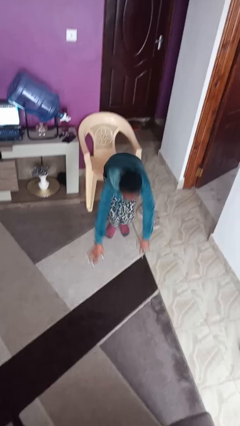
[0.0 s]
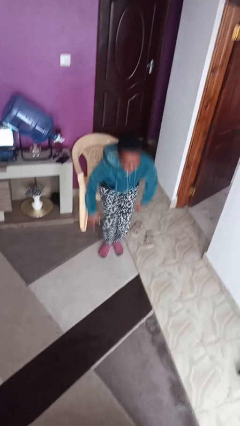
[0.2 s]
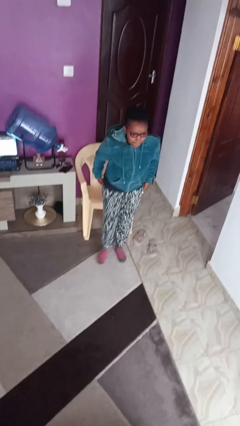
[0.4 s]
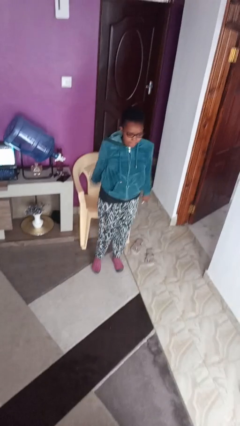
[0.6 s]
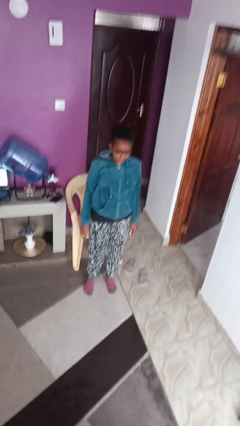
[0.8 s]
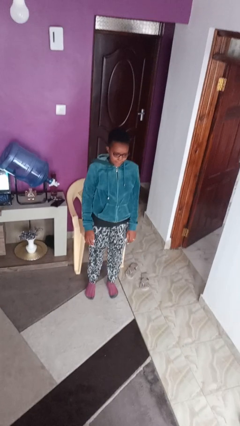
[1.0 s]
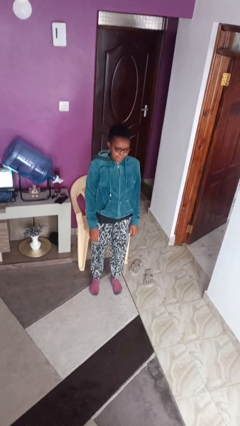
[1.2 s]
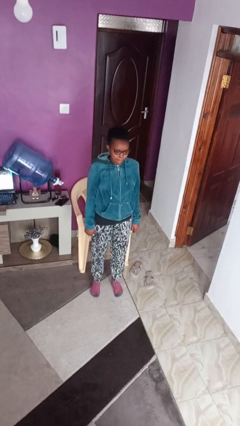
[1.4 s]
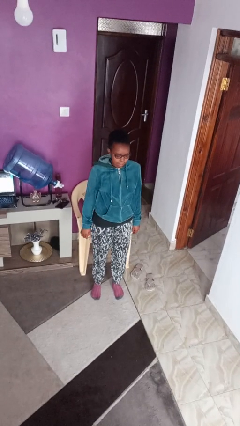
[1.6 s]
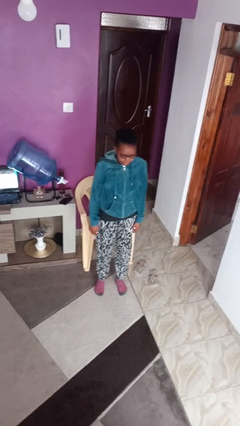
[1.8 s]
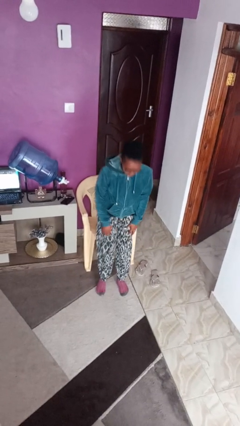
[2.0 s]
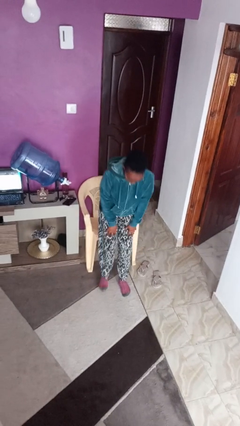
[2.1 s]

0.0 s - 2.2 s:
person stands up from floor

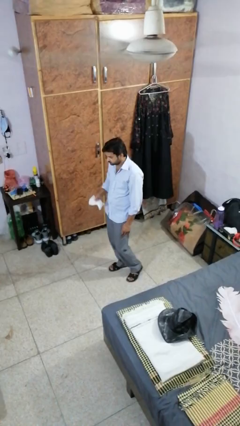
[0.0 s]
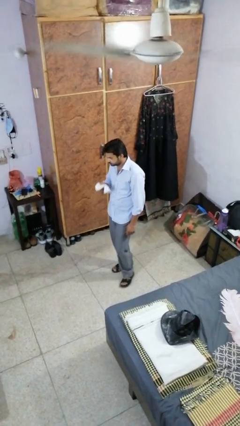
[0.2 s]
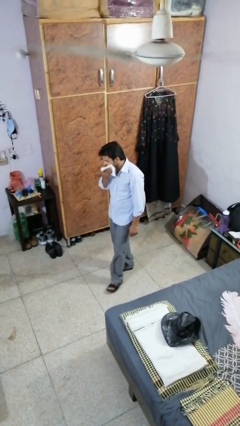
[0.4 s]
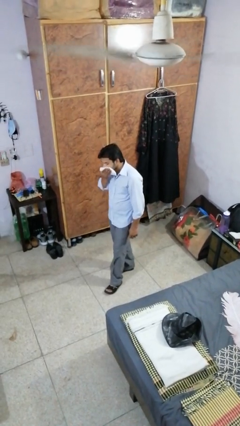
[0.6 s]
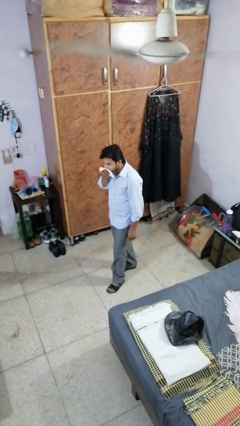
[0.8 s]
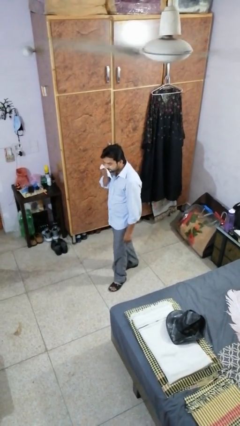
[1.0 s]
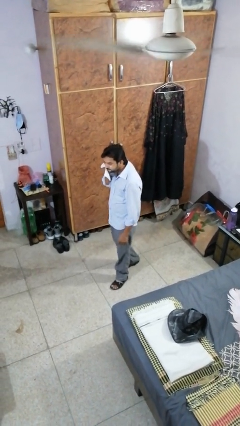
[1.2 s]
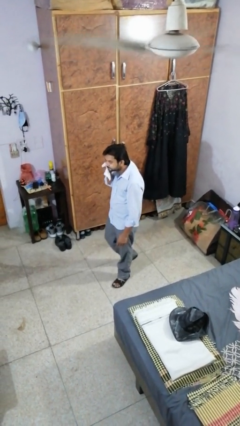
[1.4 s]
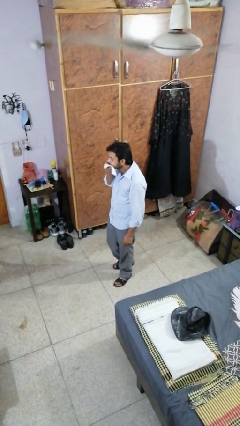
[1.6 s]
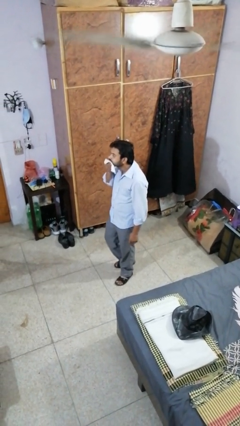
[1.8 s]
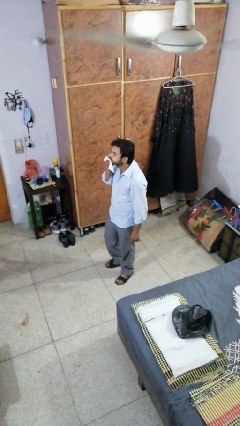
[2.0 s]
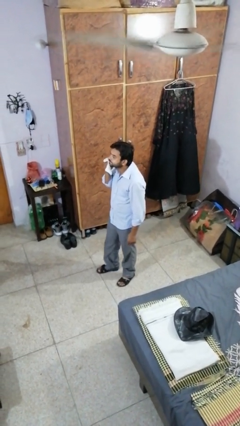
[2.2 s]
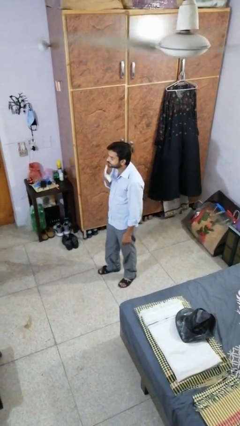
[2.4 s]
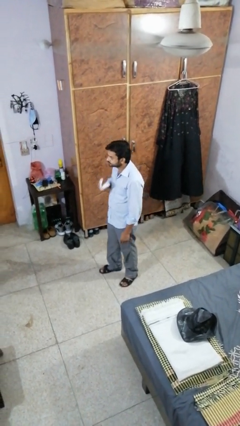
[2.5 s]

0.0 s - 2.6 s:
person wipes mouth with napkin

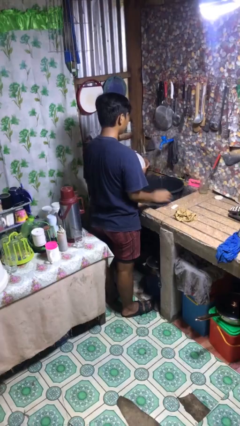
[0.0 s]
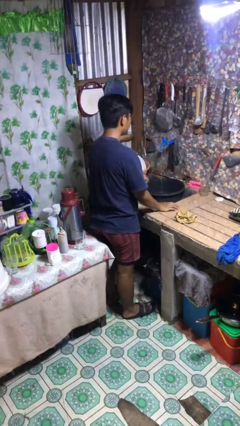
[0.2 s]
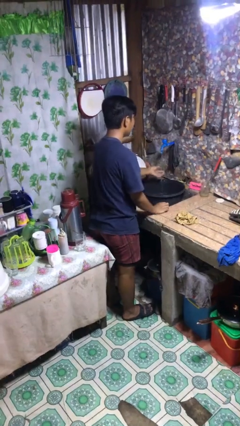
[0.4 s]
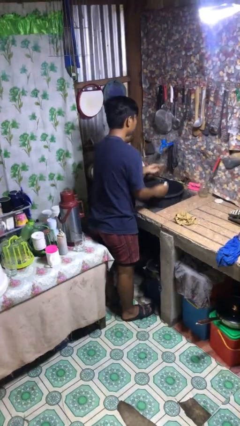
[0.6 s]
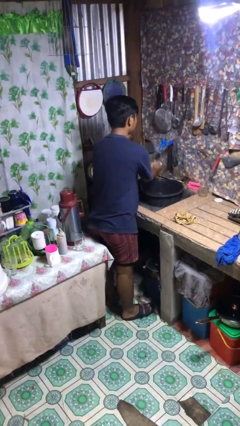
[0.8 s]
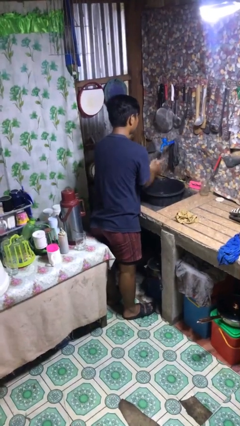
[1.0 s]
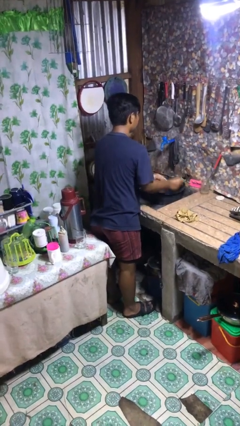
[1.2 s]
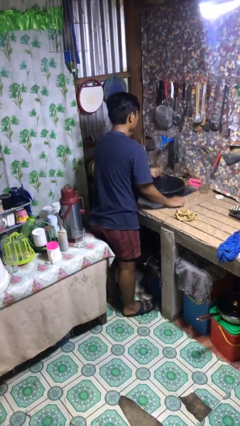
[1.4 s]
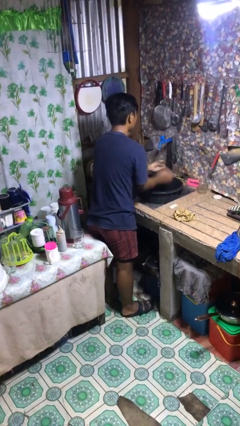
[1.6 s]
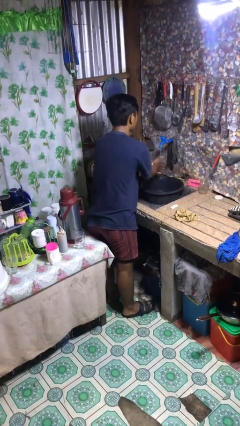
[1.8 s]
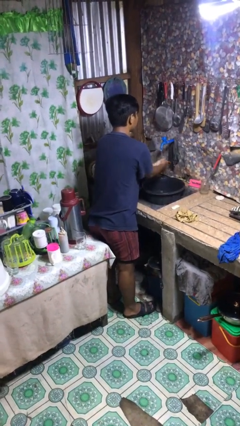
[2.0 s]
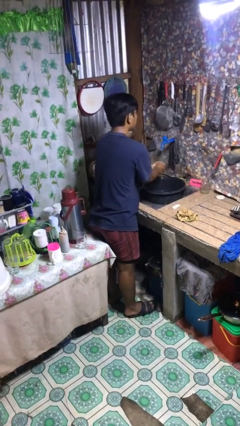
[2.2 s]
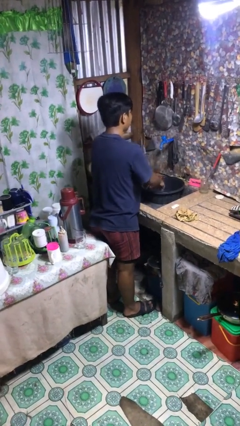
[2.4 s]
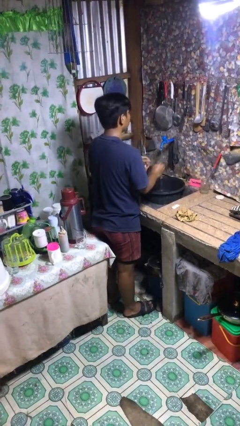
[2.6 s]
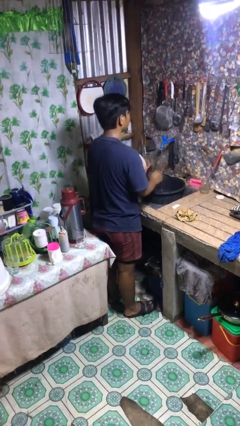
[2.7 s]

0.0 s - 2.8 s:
person washes hands

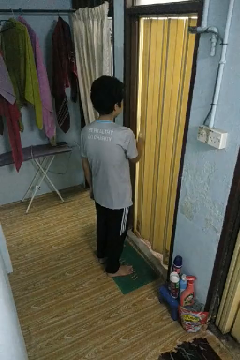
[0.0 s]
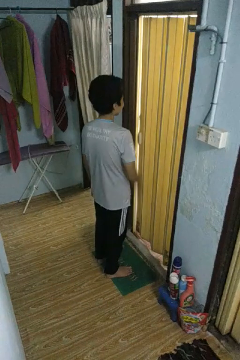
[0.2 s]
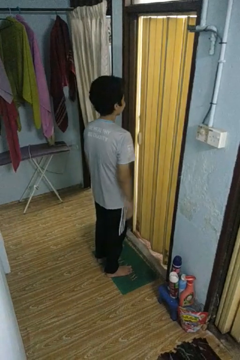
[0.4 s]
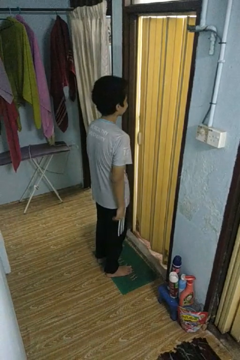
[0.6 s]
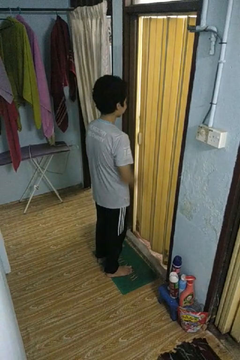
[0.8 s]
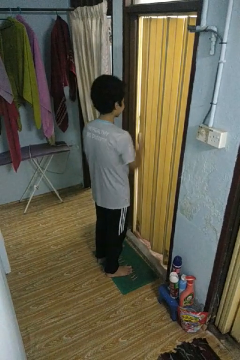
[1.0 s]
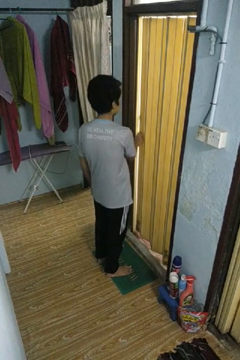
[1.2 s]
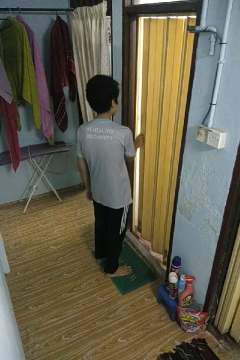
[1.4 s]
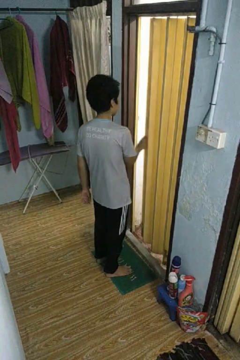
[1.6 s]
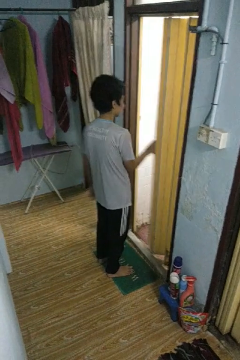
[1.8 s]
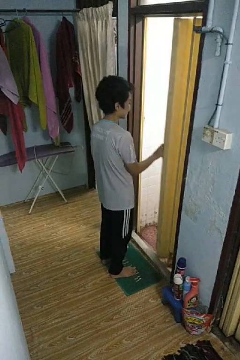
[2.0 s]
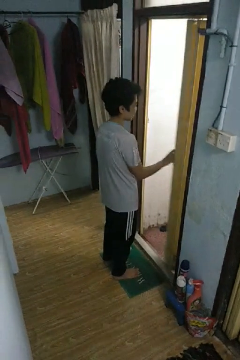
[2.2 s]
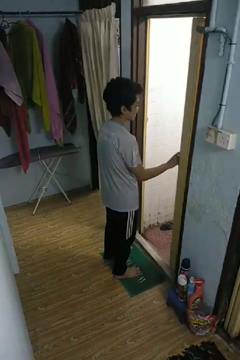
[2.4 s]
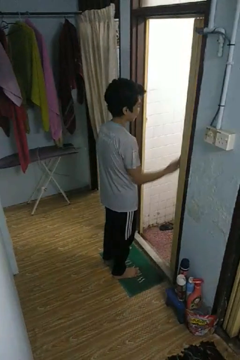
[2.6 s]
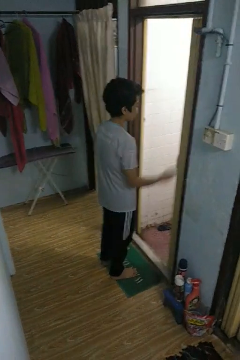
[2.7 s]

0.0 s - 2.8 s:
person opens sliding door

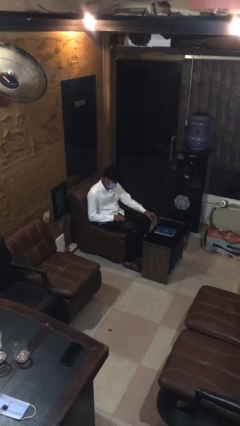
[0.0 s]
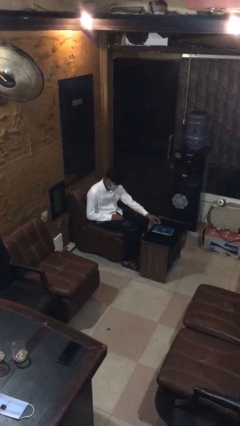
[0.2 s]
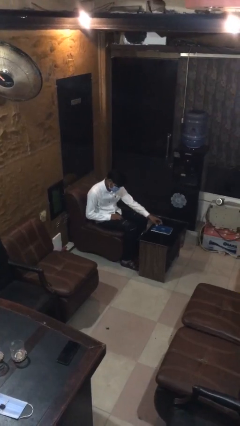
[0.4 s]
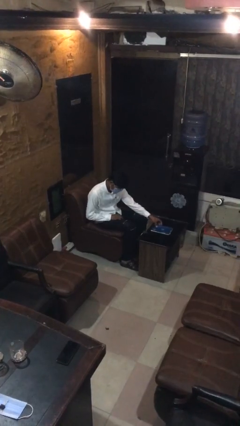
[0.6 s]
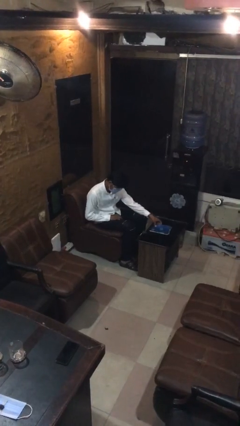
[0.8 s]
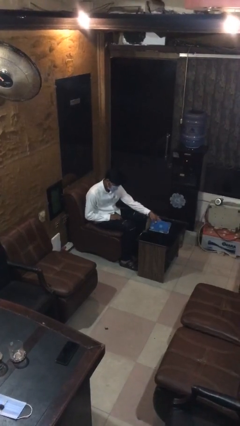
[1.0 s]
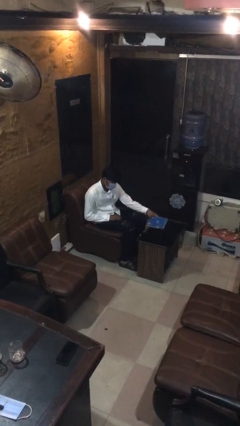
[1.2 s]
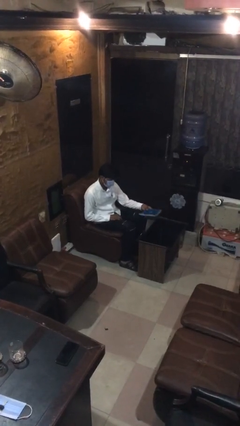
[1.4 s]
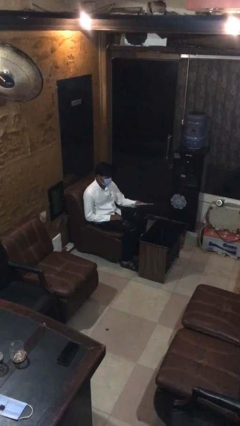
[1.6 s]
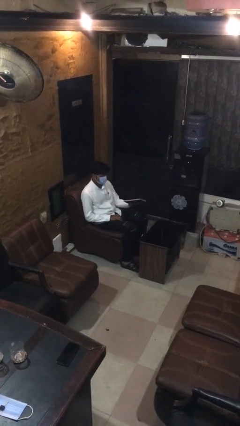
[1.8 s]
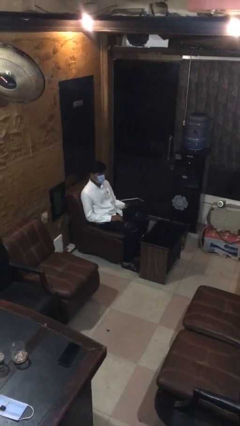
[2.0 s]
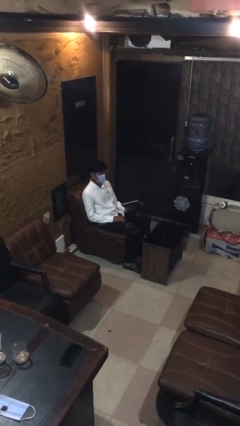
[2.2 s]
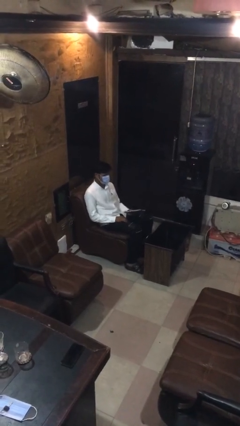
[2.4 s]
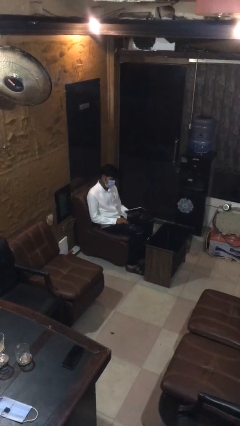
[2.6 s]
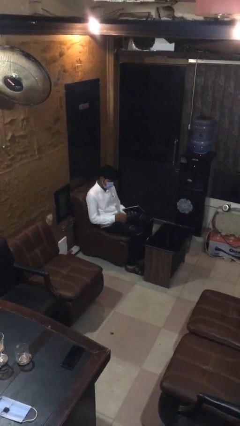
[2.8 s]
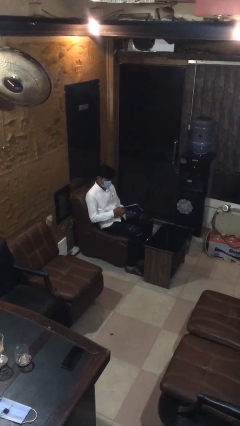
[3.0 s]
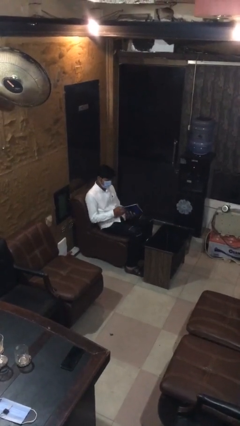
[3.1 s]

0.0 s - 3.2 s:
person picks up object from table

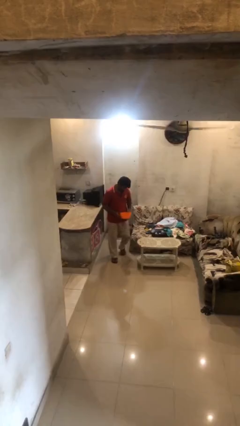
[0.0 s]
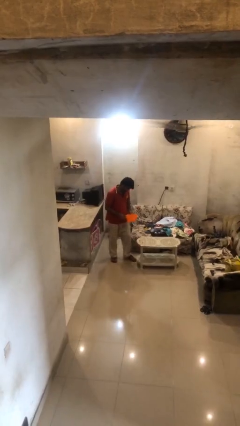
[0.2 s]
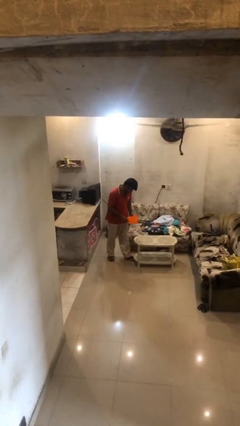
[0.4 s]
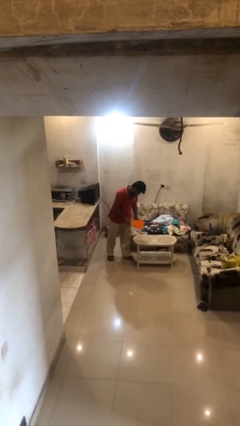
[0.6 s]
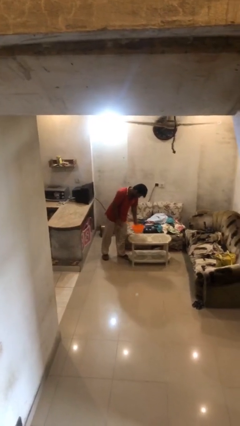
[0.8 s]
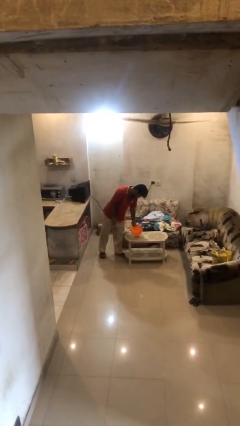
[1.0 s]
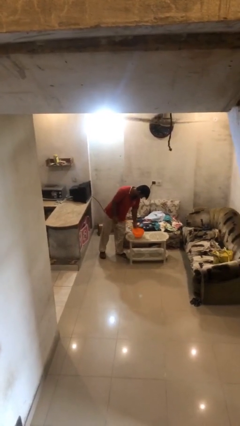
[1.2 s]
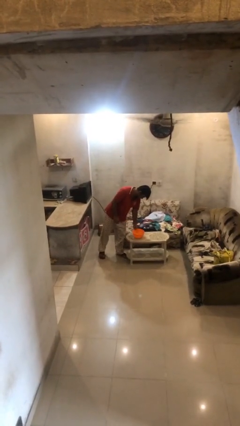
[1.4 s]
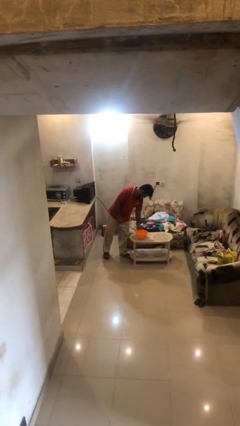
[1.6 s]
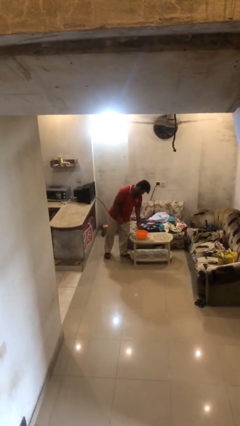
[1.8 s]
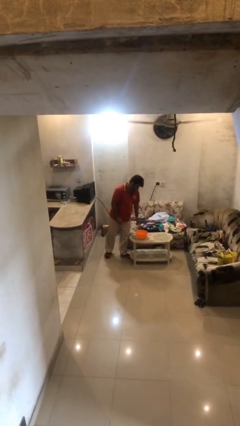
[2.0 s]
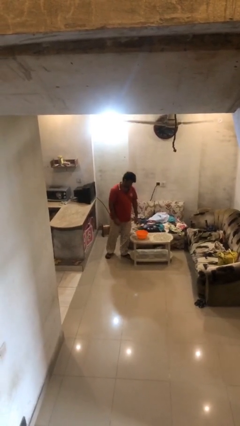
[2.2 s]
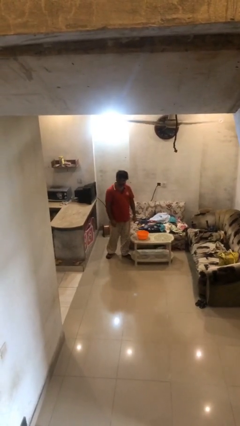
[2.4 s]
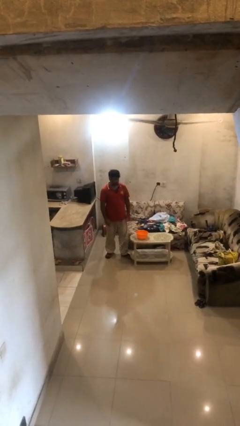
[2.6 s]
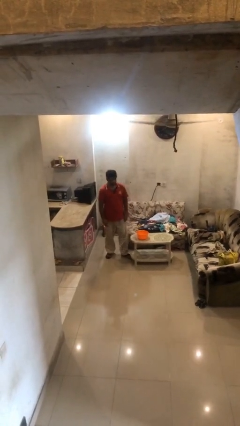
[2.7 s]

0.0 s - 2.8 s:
person puts down object on table

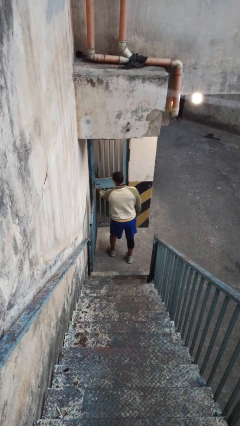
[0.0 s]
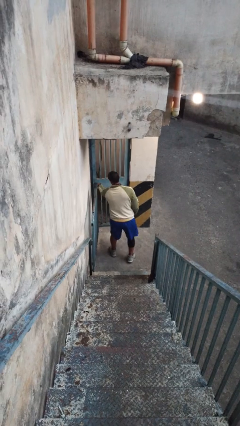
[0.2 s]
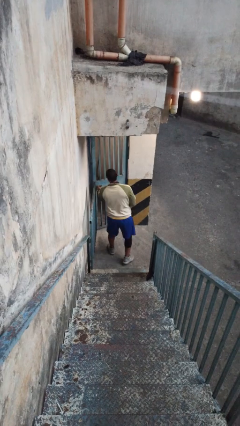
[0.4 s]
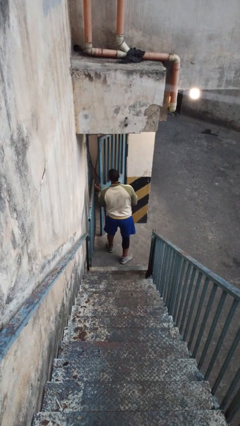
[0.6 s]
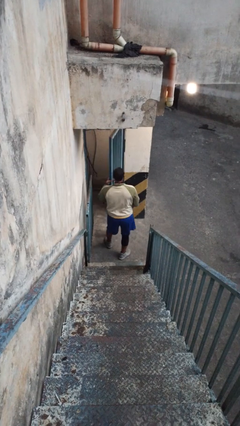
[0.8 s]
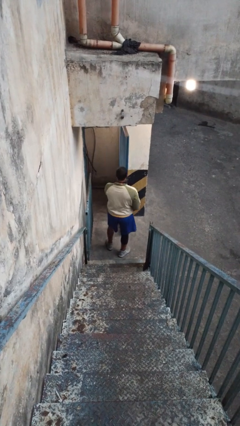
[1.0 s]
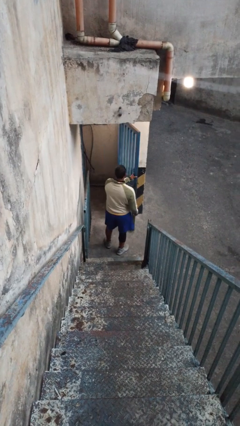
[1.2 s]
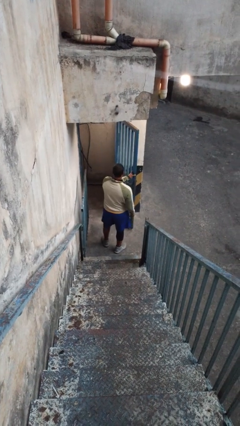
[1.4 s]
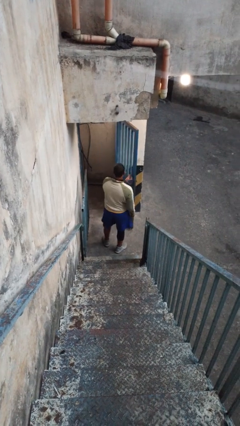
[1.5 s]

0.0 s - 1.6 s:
person opens facility door
